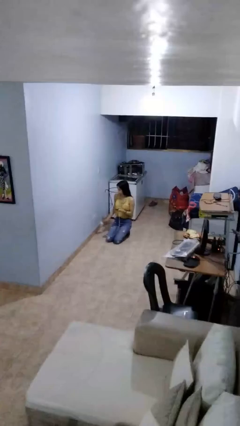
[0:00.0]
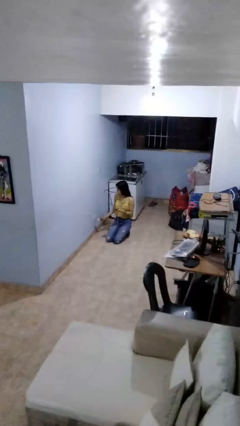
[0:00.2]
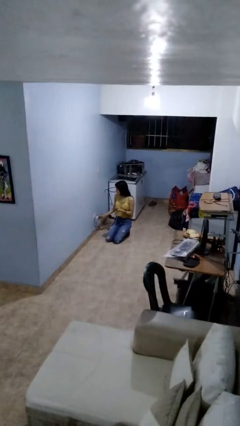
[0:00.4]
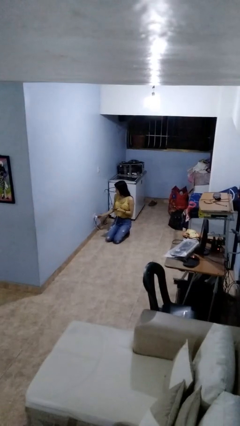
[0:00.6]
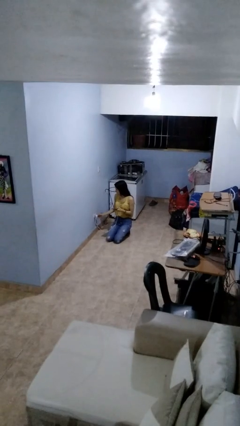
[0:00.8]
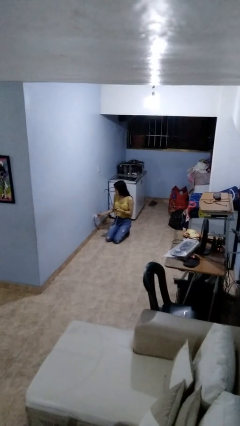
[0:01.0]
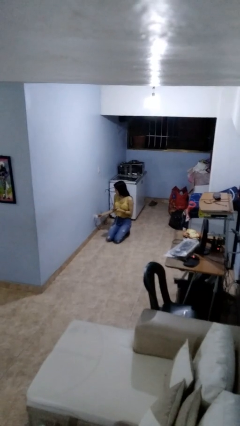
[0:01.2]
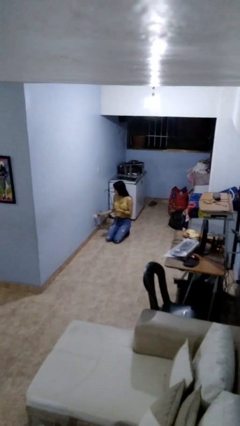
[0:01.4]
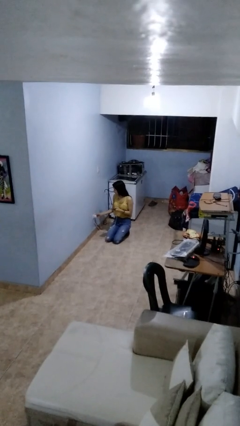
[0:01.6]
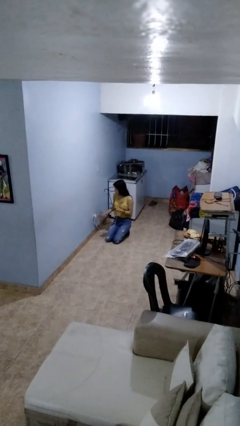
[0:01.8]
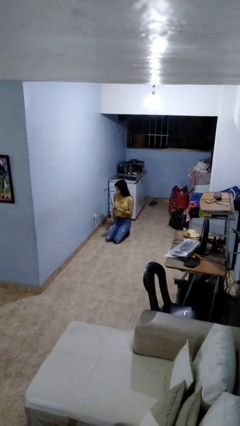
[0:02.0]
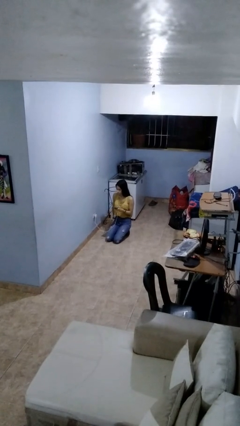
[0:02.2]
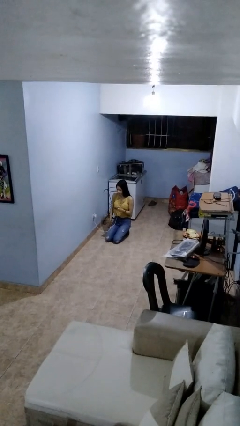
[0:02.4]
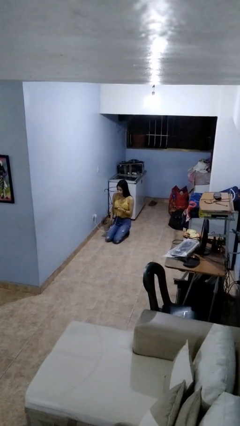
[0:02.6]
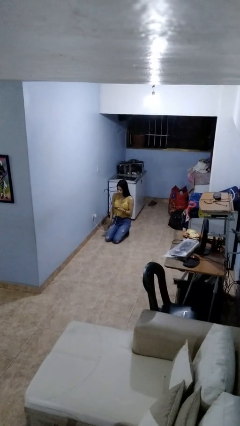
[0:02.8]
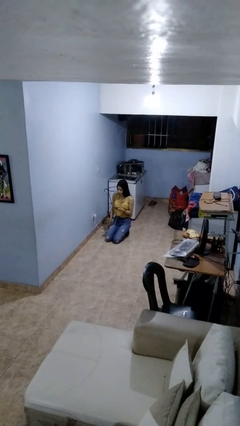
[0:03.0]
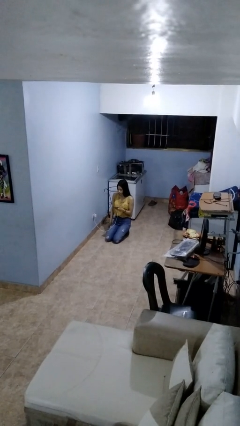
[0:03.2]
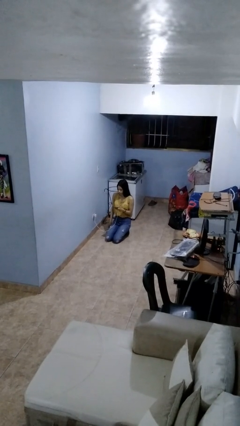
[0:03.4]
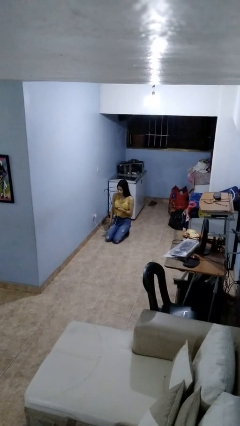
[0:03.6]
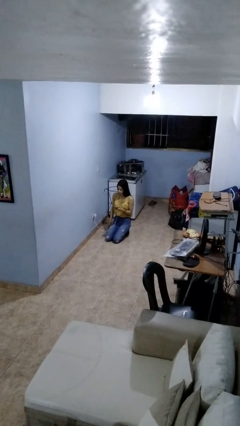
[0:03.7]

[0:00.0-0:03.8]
person plugs into electrical socket

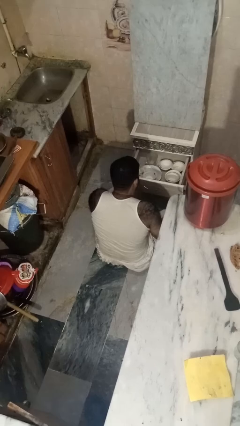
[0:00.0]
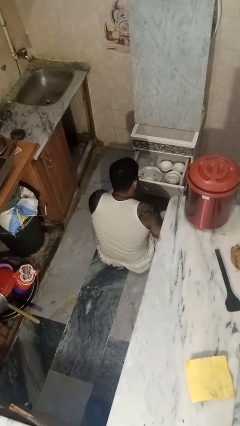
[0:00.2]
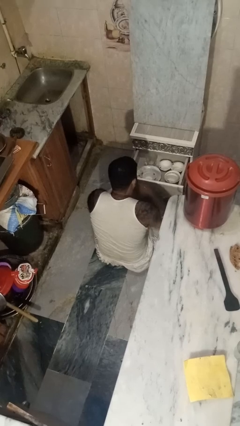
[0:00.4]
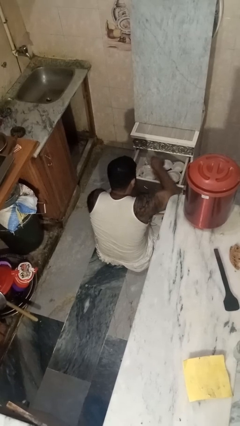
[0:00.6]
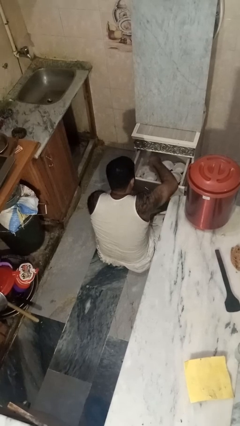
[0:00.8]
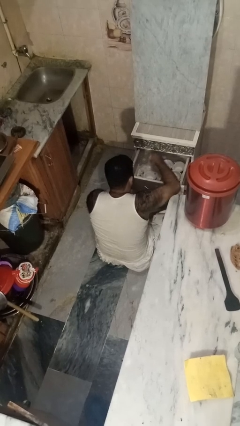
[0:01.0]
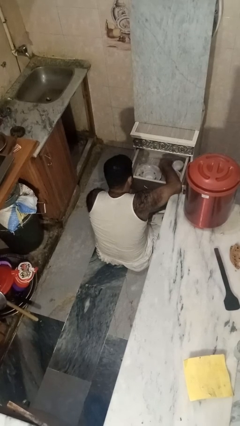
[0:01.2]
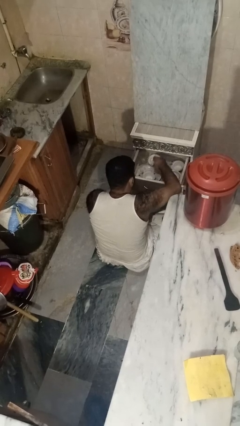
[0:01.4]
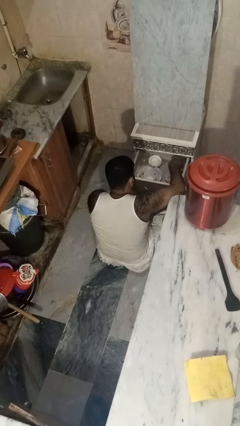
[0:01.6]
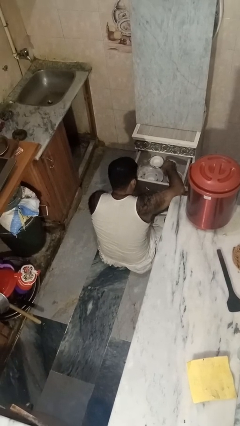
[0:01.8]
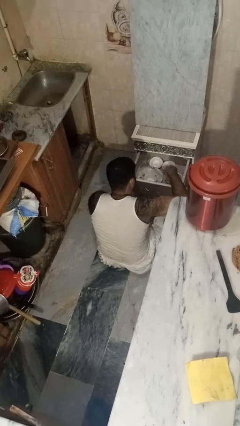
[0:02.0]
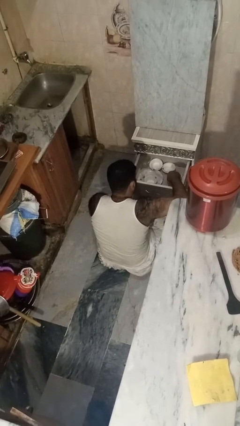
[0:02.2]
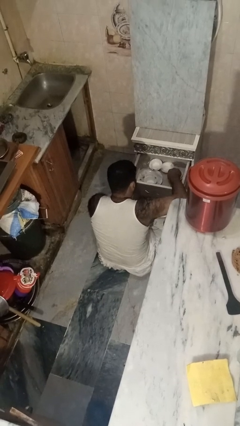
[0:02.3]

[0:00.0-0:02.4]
person searches in kitchen drawer

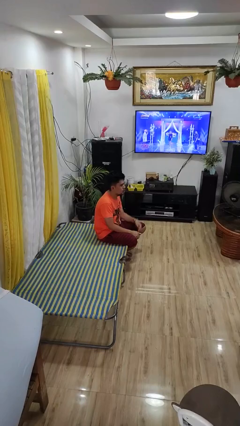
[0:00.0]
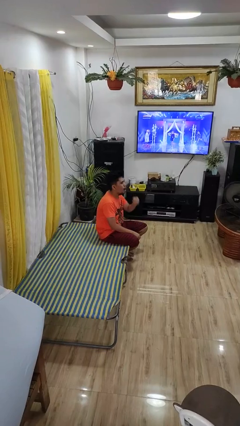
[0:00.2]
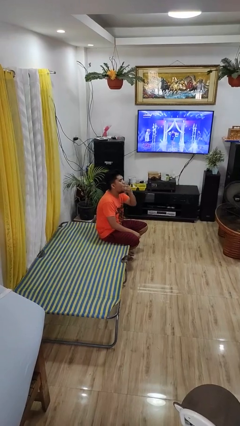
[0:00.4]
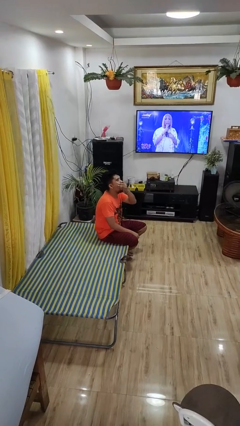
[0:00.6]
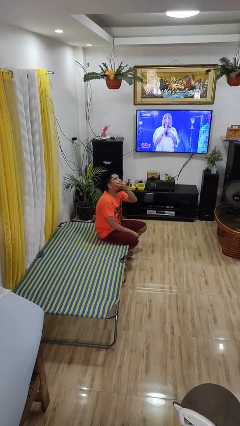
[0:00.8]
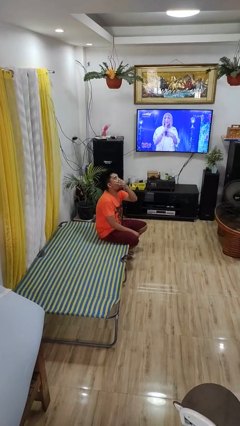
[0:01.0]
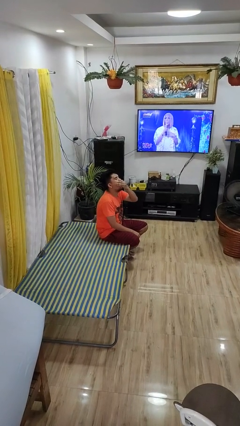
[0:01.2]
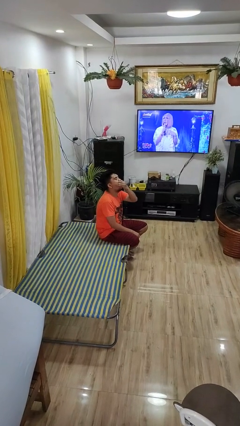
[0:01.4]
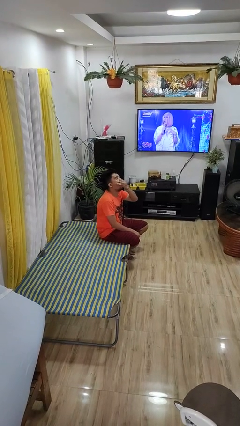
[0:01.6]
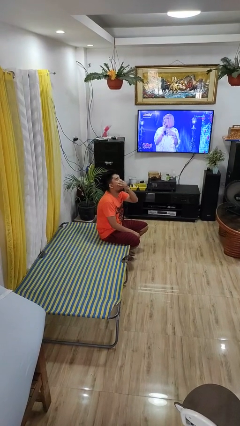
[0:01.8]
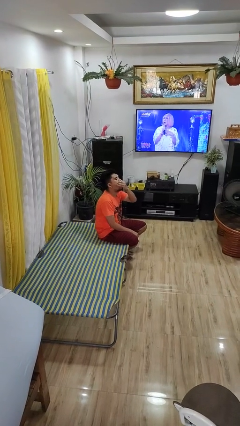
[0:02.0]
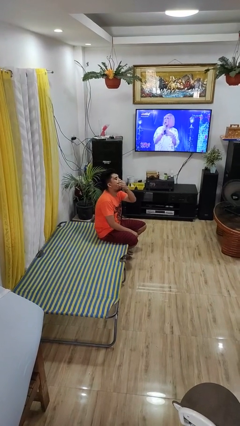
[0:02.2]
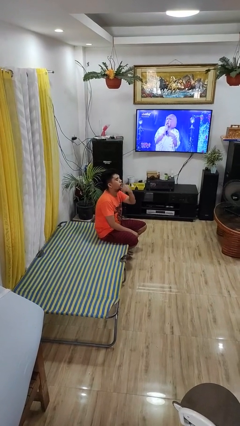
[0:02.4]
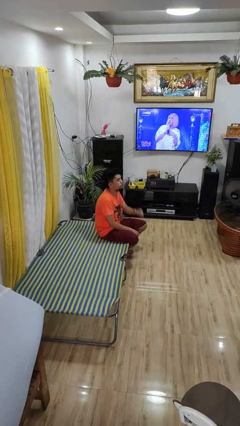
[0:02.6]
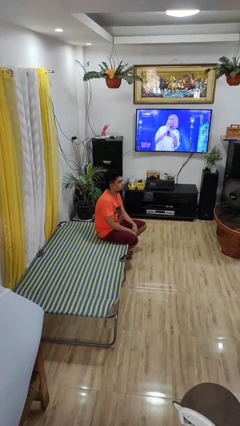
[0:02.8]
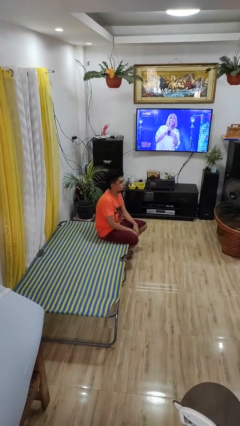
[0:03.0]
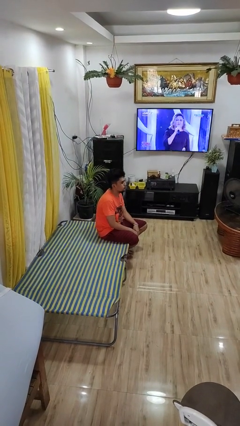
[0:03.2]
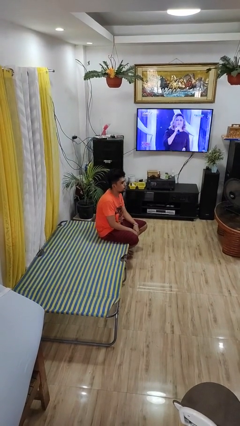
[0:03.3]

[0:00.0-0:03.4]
person yawns

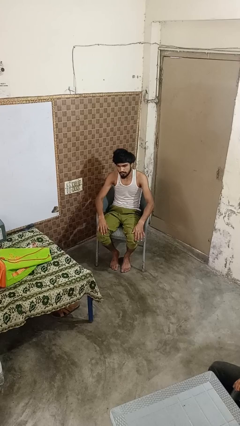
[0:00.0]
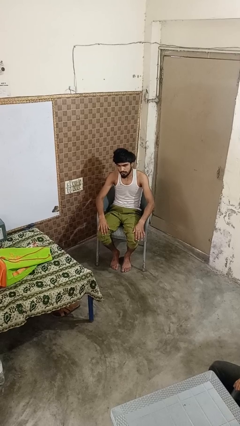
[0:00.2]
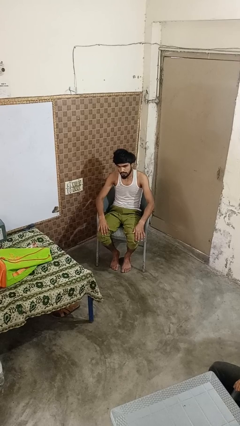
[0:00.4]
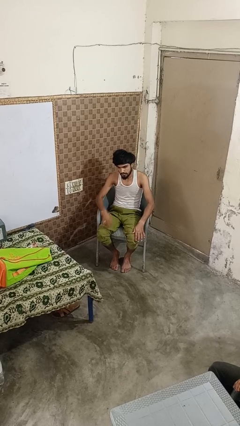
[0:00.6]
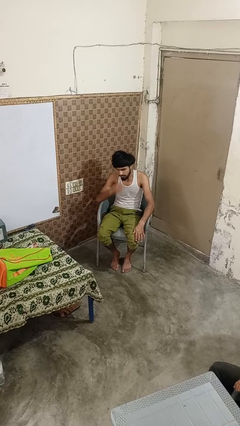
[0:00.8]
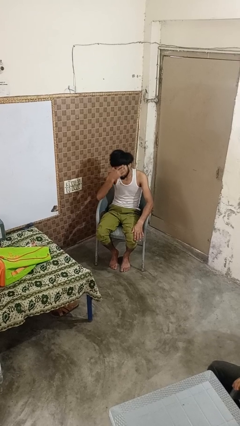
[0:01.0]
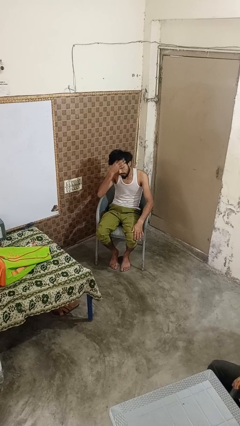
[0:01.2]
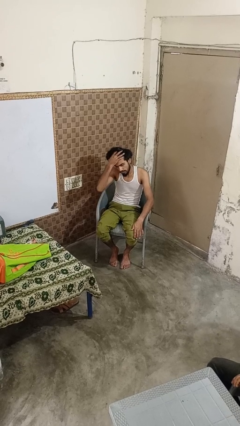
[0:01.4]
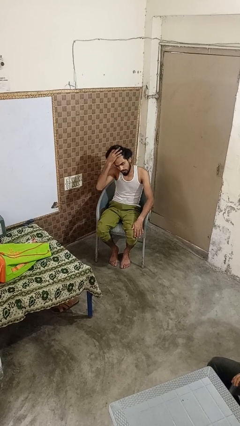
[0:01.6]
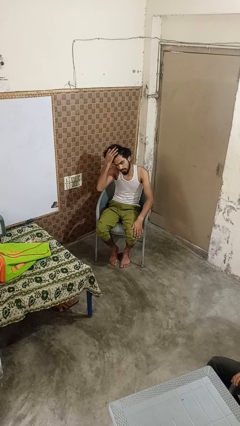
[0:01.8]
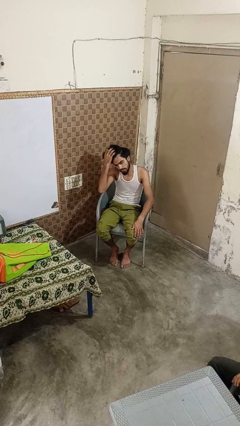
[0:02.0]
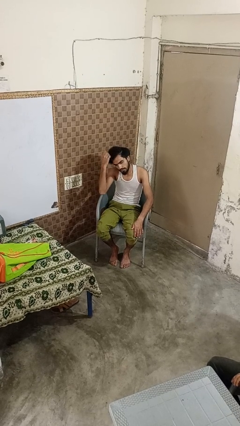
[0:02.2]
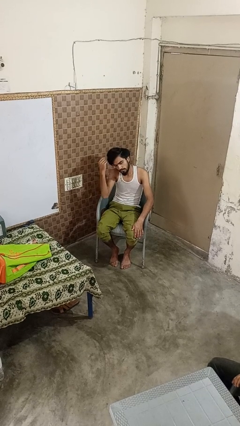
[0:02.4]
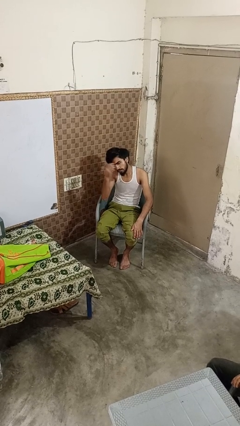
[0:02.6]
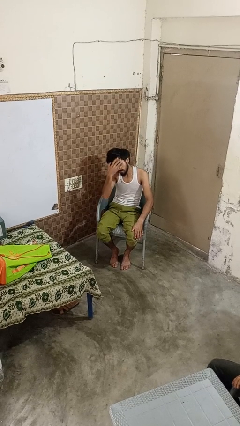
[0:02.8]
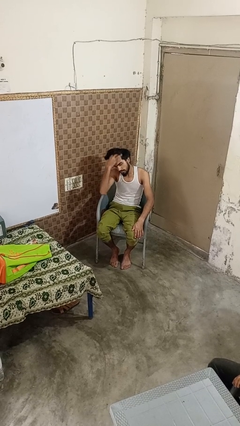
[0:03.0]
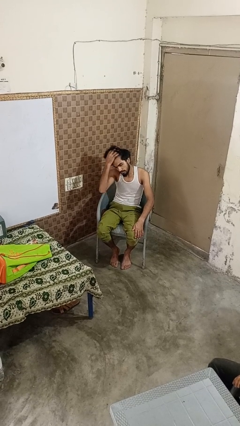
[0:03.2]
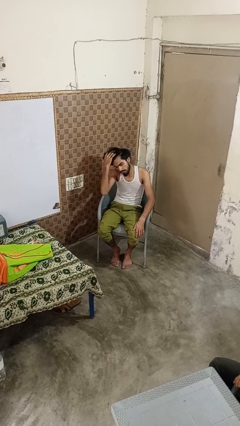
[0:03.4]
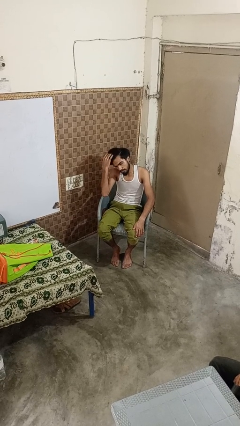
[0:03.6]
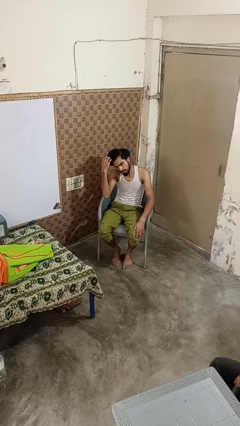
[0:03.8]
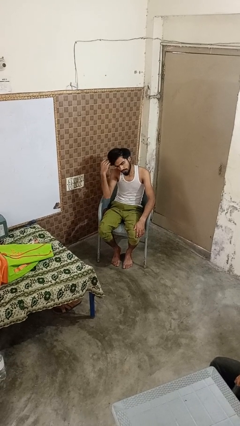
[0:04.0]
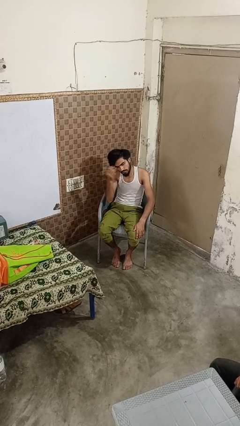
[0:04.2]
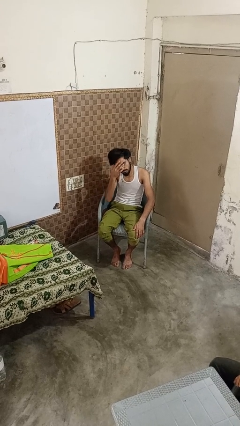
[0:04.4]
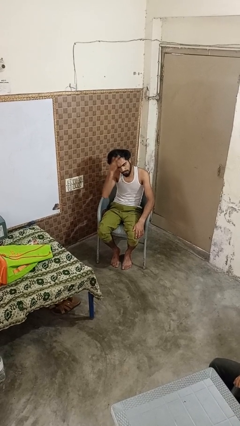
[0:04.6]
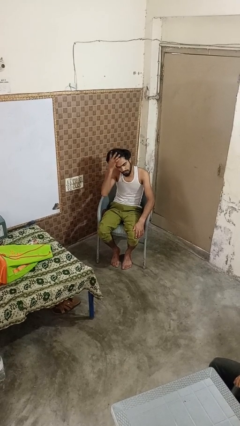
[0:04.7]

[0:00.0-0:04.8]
person strokes hair

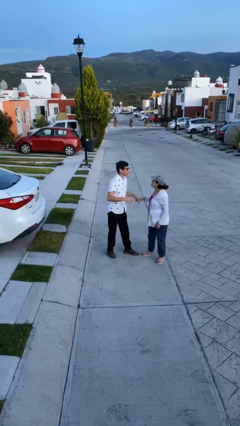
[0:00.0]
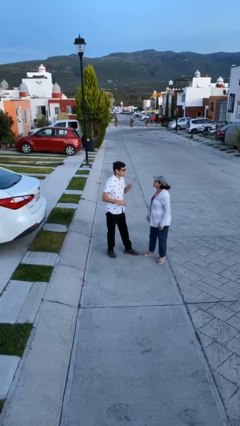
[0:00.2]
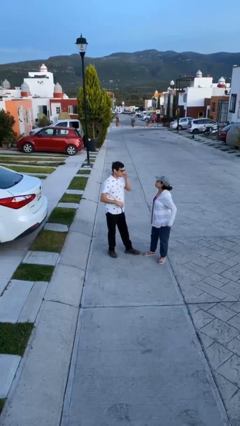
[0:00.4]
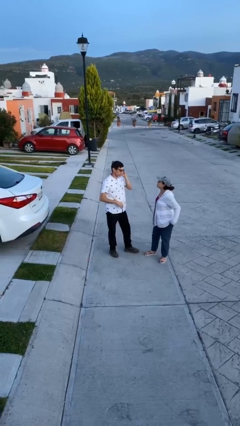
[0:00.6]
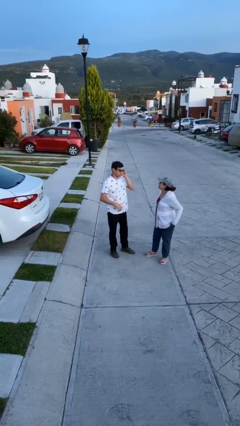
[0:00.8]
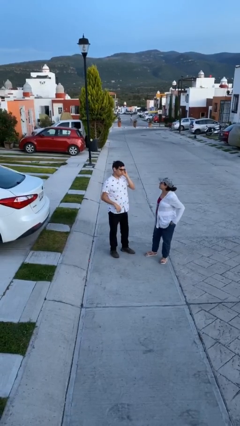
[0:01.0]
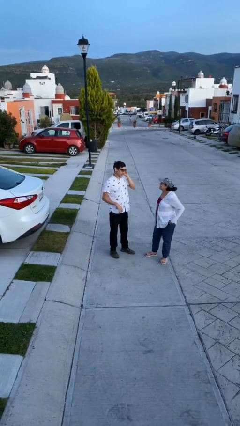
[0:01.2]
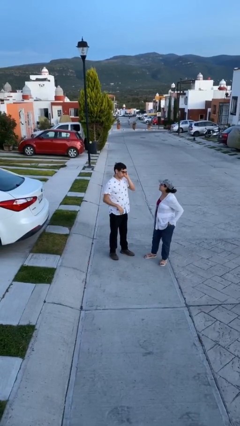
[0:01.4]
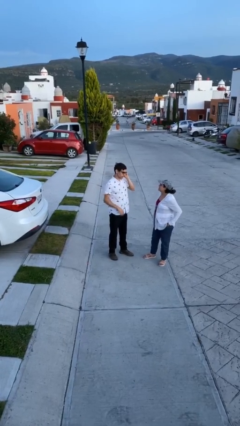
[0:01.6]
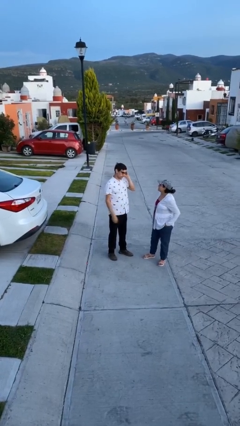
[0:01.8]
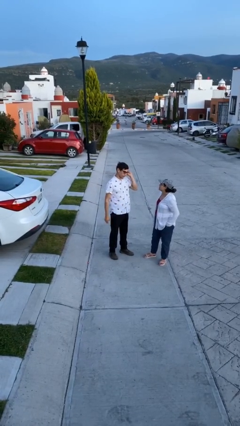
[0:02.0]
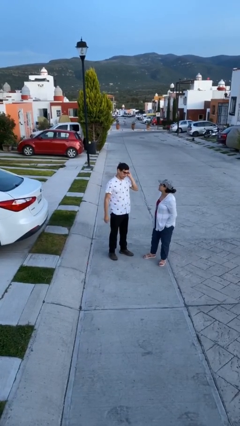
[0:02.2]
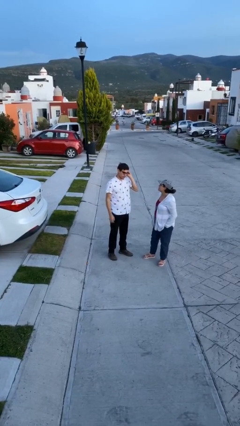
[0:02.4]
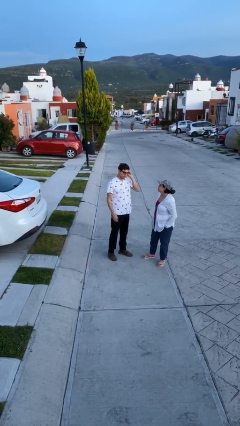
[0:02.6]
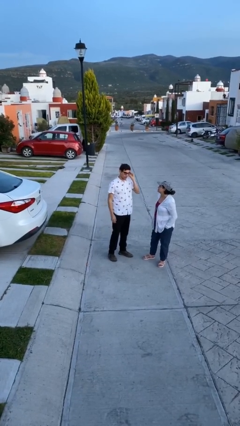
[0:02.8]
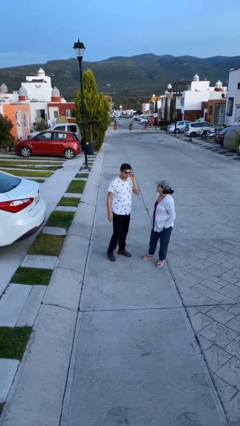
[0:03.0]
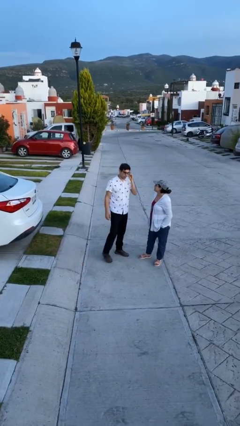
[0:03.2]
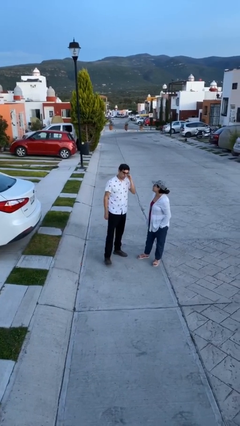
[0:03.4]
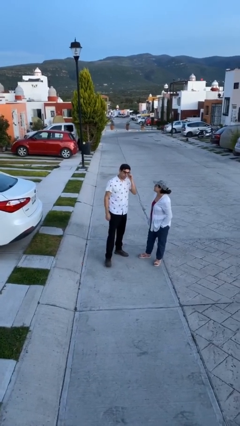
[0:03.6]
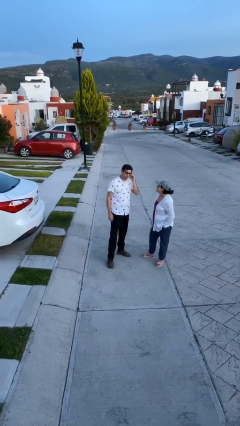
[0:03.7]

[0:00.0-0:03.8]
person talks to person
